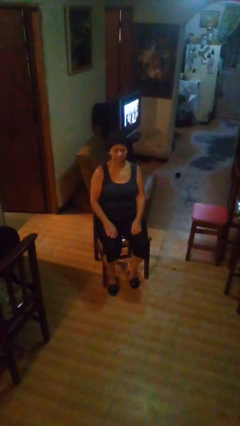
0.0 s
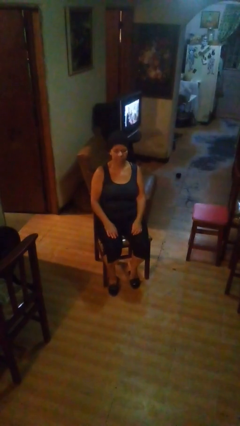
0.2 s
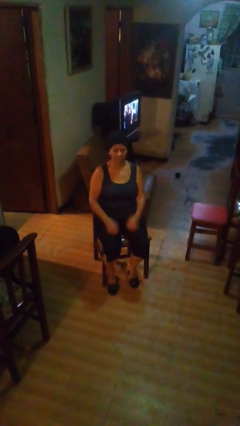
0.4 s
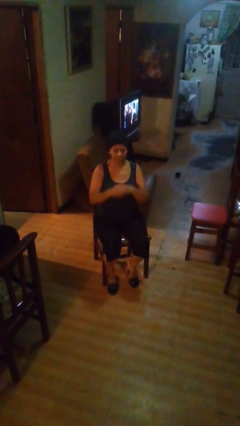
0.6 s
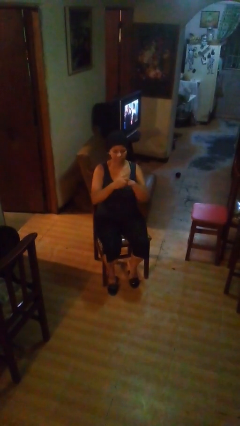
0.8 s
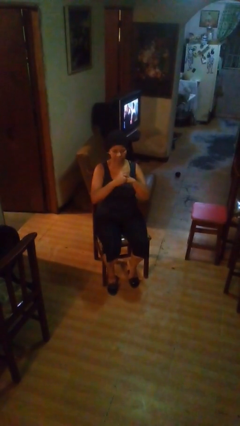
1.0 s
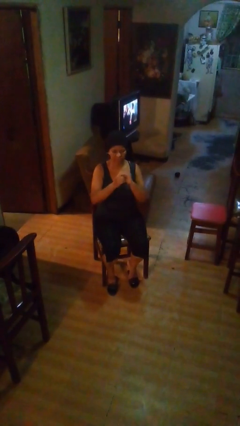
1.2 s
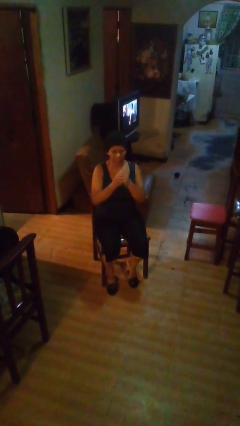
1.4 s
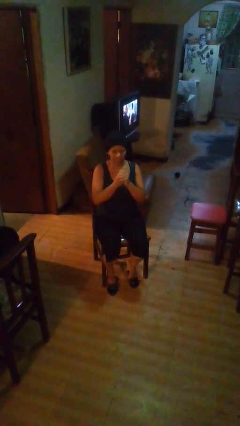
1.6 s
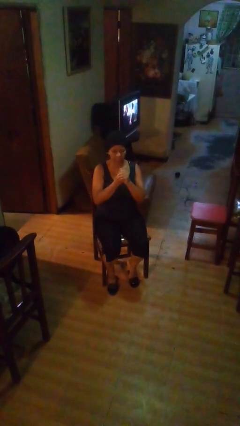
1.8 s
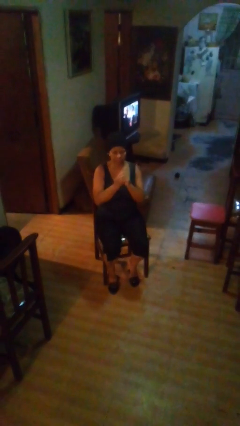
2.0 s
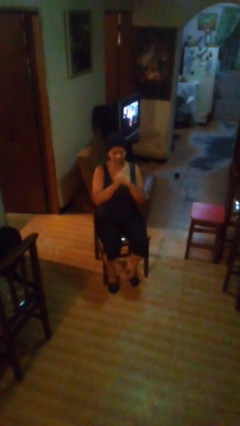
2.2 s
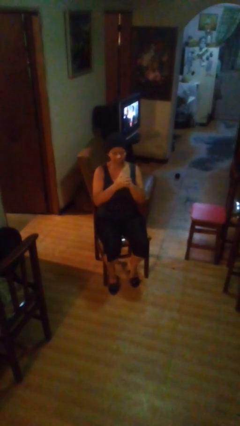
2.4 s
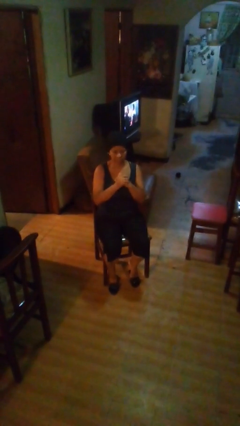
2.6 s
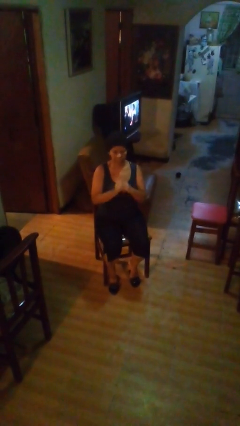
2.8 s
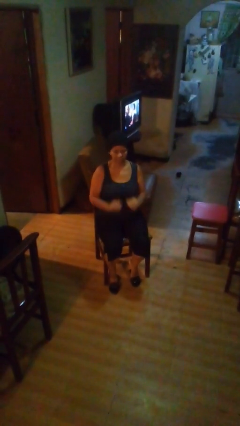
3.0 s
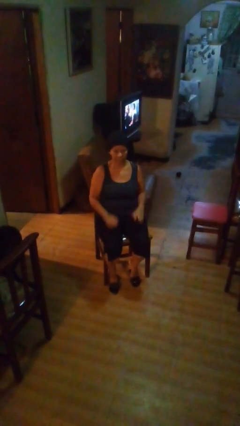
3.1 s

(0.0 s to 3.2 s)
person cracks knuckles

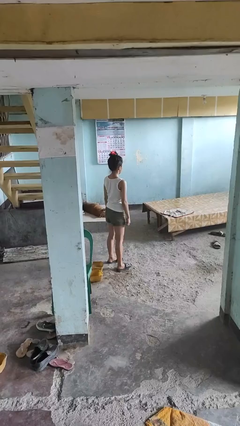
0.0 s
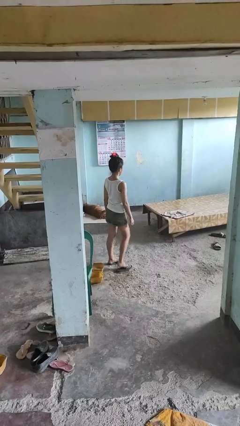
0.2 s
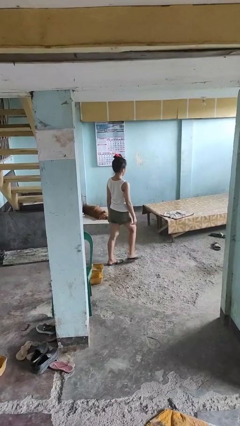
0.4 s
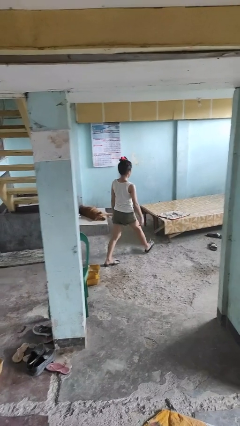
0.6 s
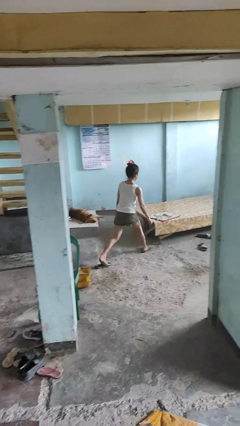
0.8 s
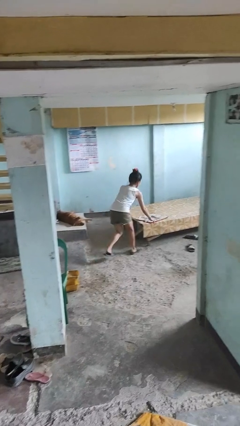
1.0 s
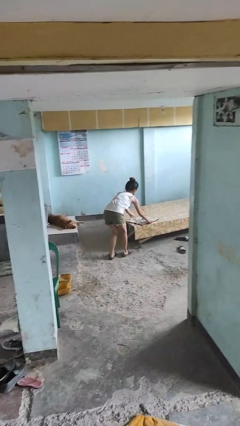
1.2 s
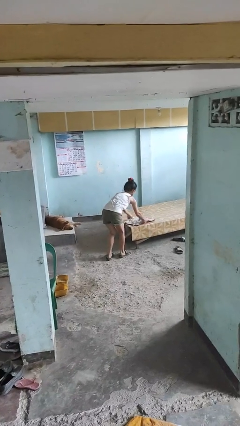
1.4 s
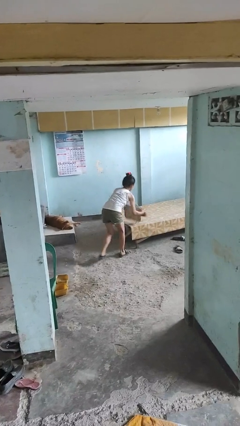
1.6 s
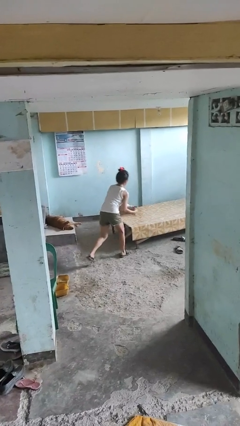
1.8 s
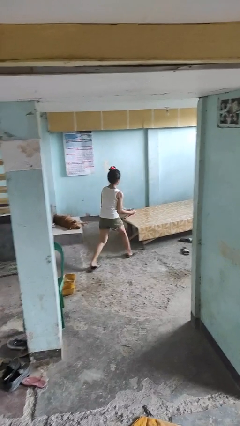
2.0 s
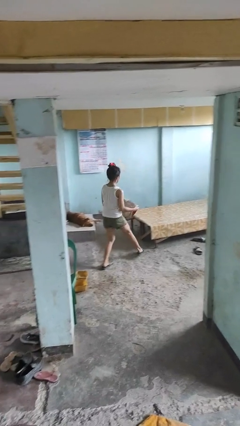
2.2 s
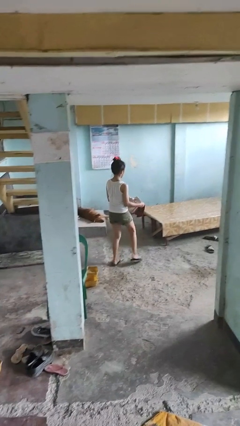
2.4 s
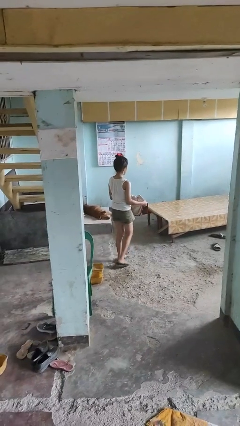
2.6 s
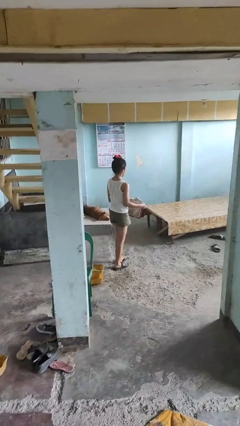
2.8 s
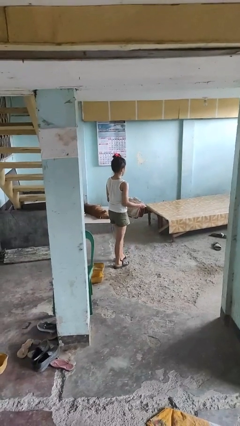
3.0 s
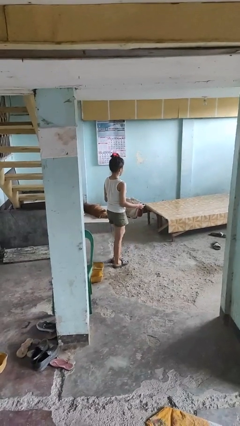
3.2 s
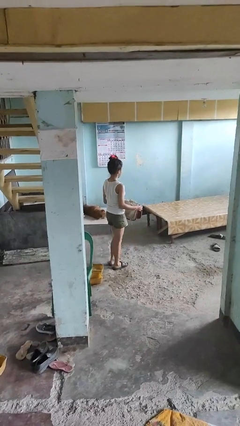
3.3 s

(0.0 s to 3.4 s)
person picks up object from table

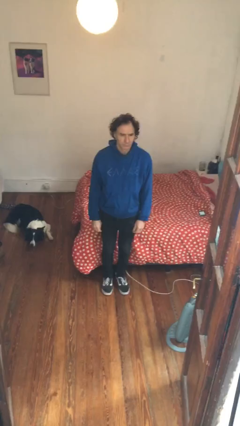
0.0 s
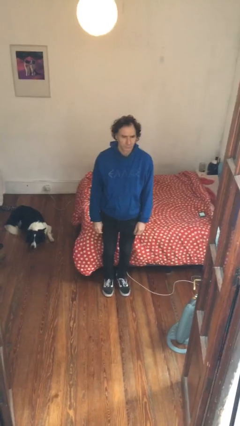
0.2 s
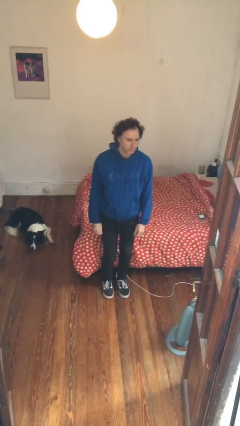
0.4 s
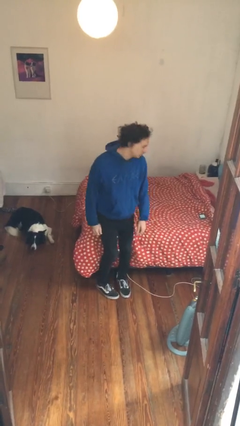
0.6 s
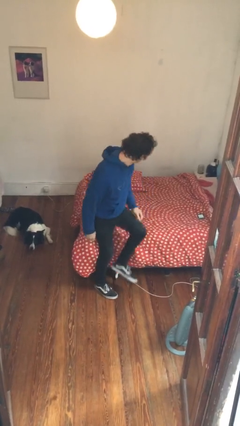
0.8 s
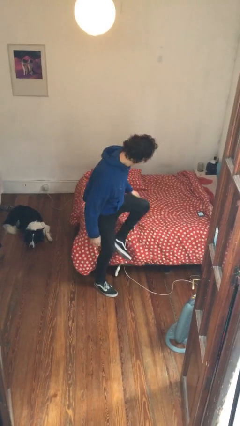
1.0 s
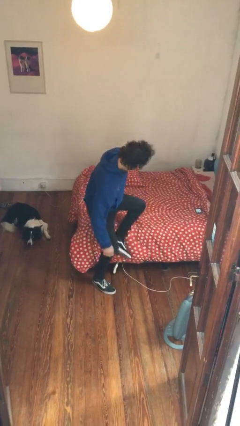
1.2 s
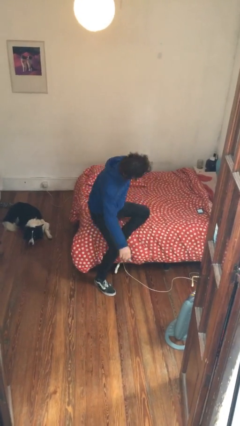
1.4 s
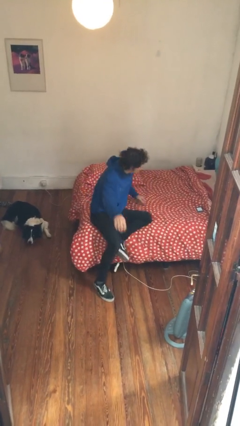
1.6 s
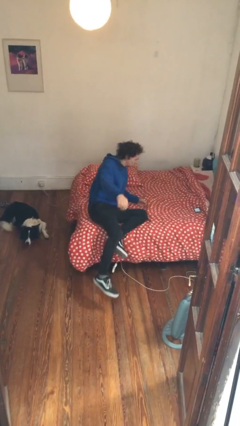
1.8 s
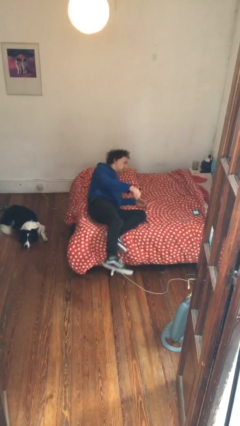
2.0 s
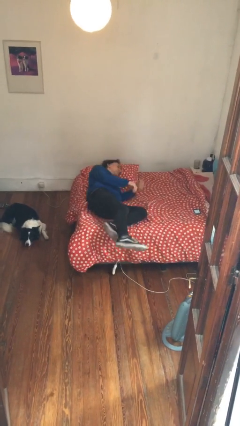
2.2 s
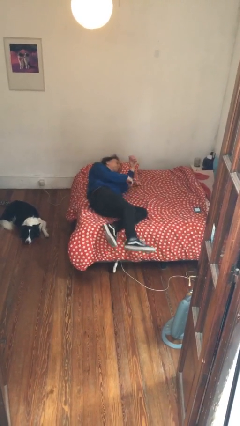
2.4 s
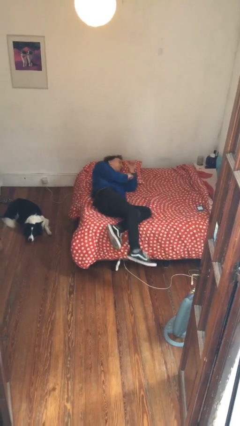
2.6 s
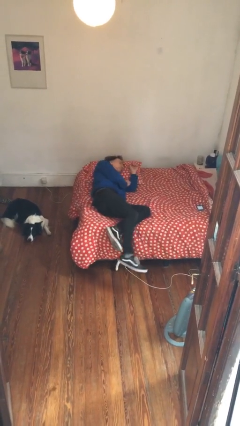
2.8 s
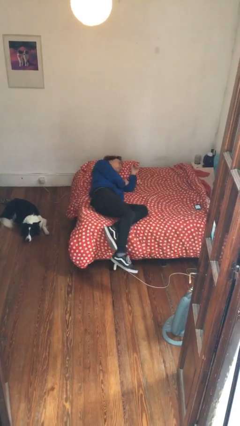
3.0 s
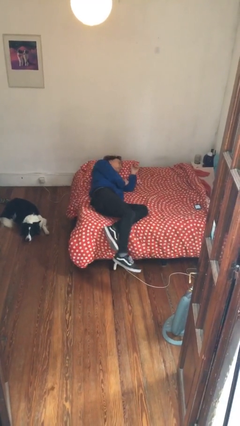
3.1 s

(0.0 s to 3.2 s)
person lies down on bed

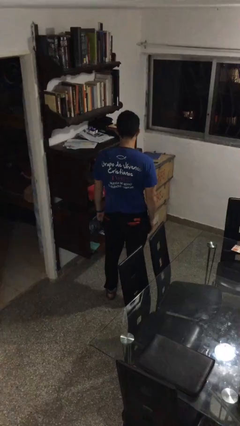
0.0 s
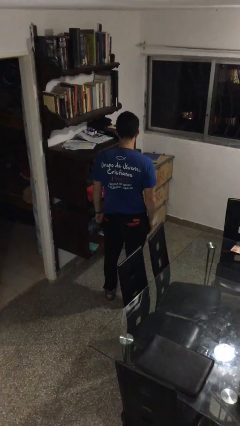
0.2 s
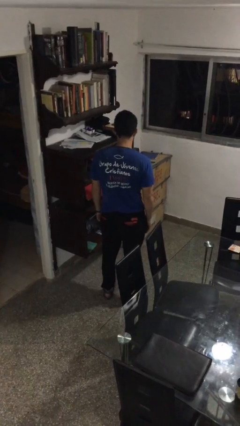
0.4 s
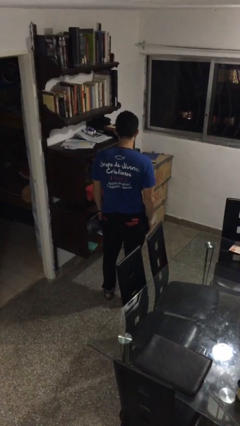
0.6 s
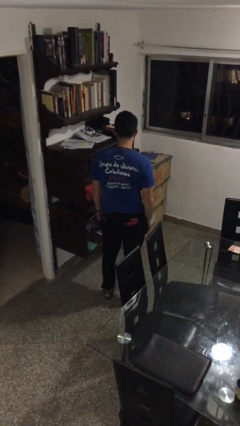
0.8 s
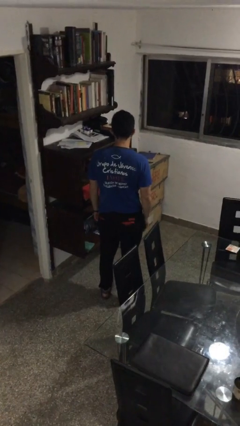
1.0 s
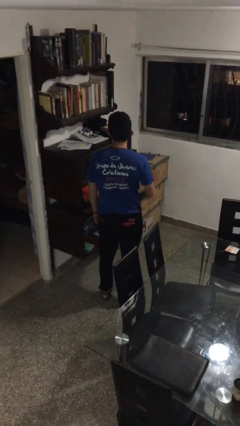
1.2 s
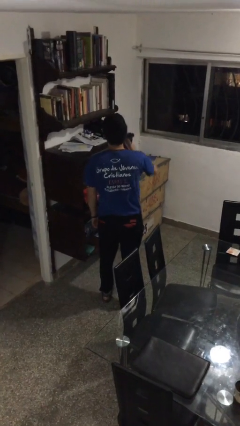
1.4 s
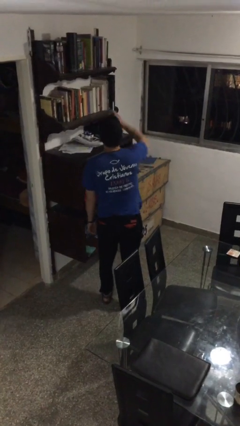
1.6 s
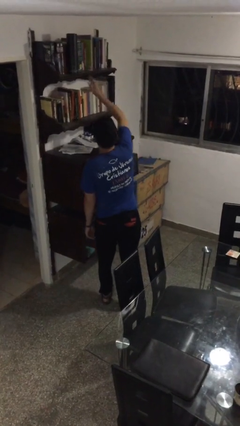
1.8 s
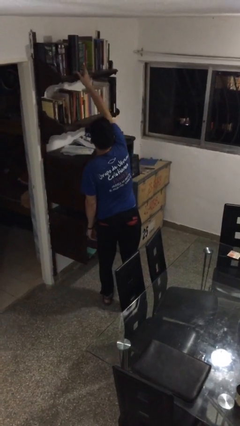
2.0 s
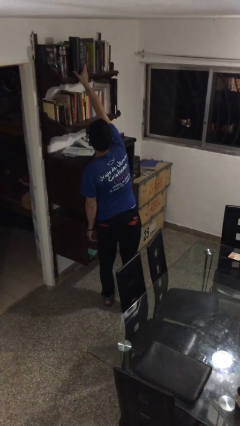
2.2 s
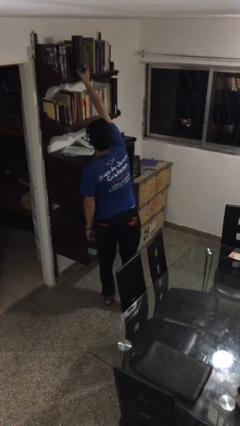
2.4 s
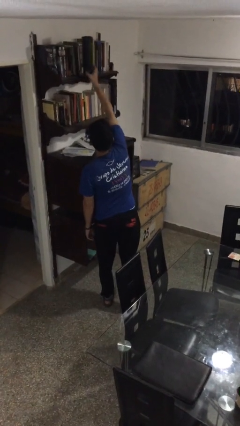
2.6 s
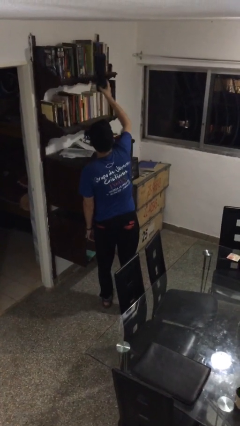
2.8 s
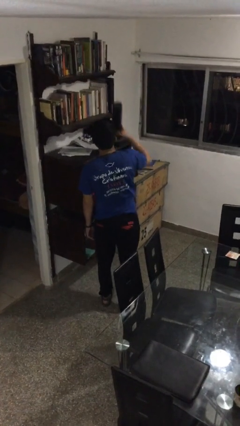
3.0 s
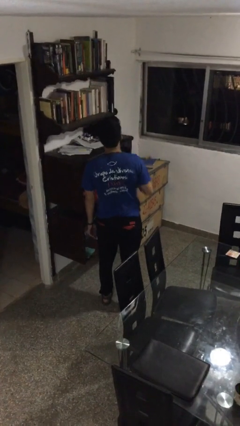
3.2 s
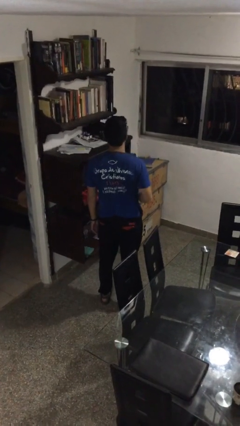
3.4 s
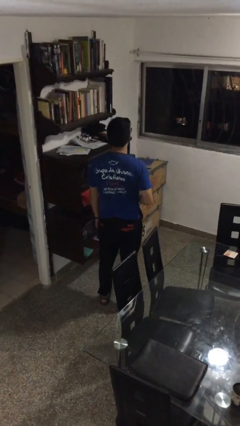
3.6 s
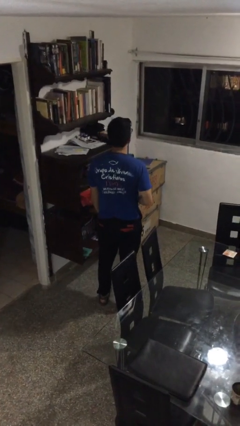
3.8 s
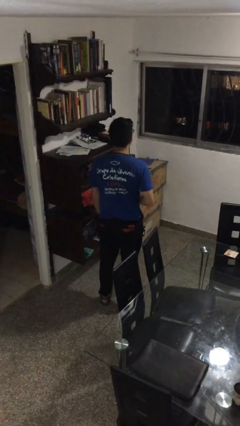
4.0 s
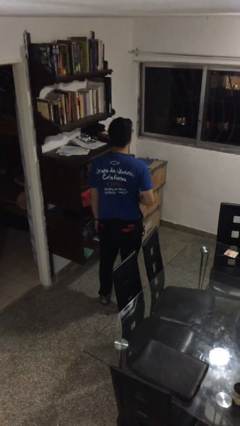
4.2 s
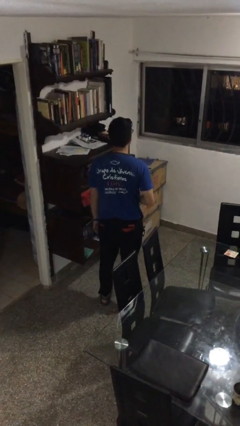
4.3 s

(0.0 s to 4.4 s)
person picks up object from shelf

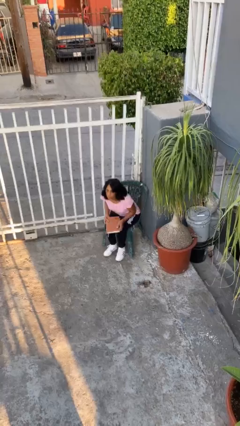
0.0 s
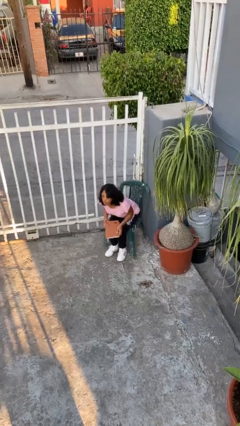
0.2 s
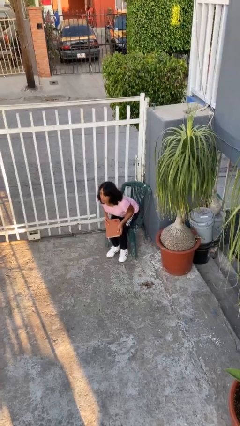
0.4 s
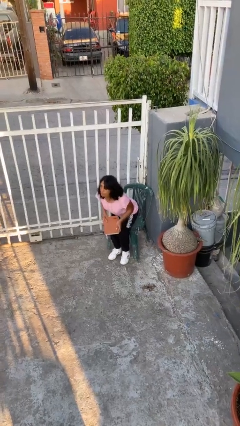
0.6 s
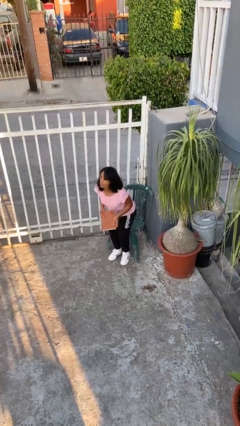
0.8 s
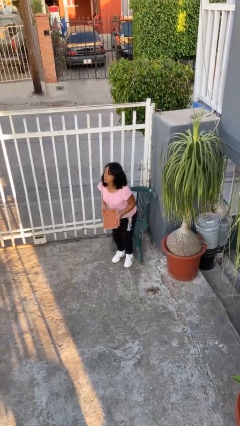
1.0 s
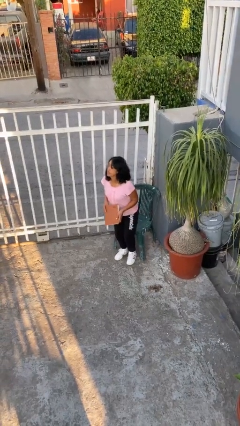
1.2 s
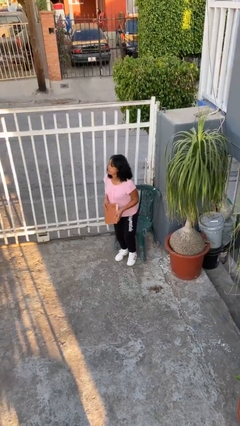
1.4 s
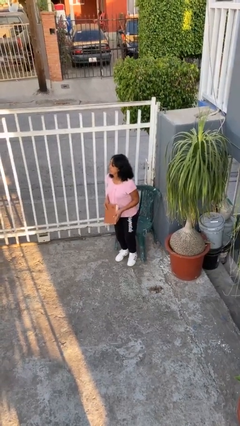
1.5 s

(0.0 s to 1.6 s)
person stands up

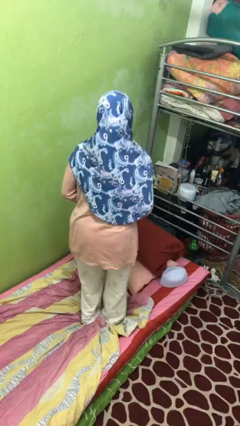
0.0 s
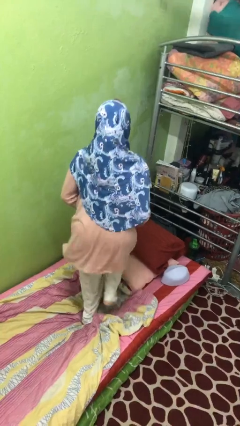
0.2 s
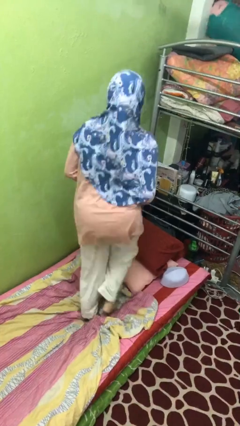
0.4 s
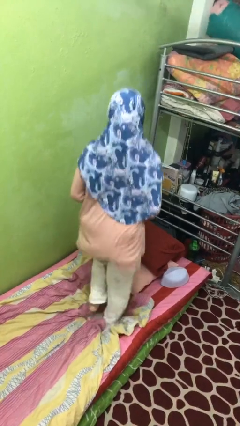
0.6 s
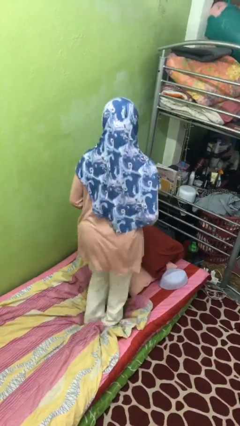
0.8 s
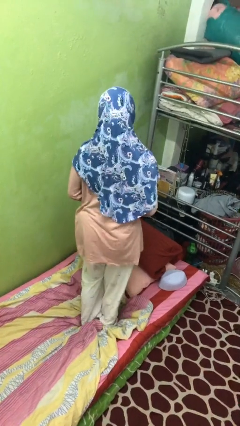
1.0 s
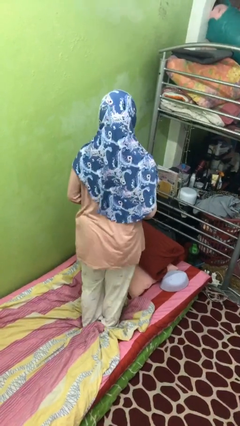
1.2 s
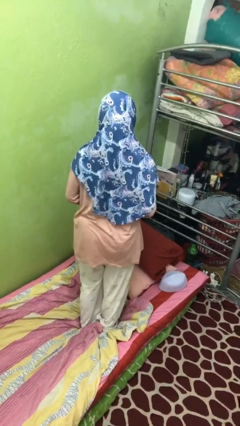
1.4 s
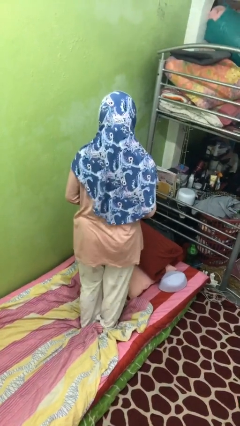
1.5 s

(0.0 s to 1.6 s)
person jumps on bed
